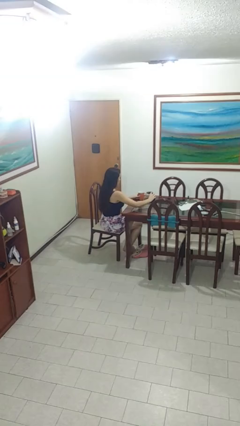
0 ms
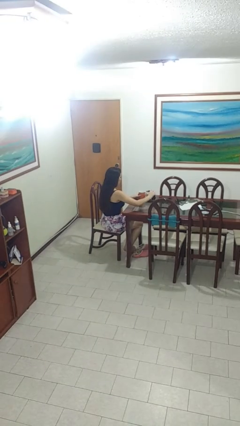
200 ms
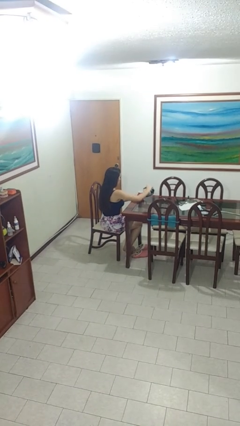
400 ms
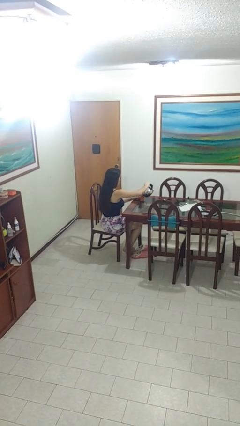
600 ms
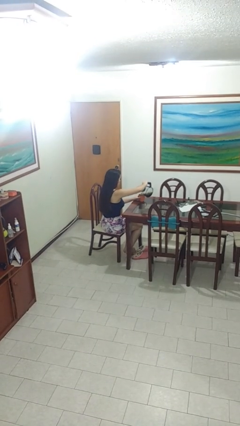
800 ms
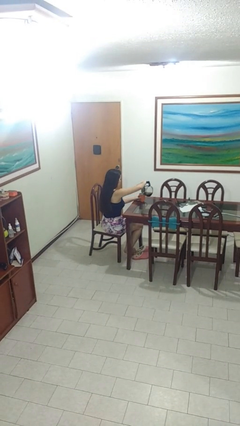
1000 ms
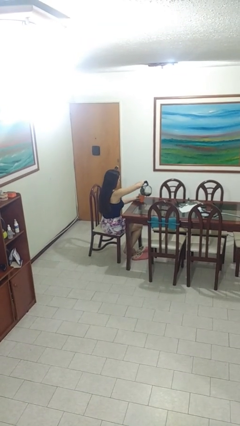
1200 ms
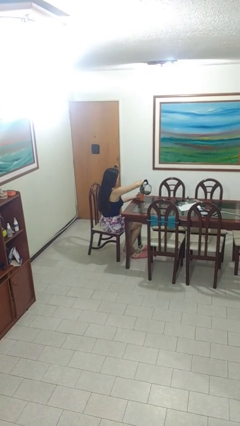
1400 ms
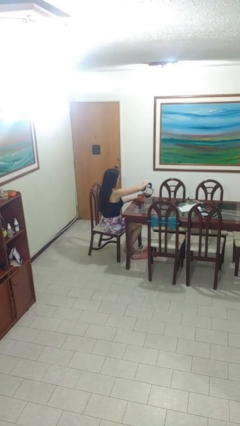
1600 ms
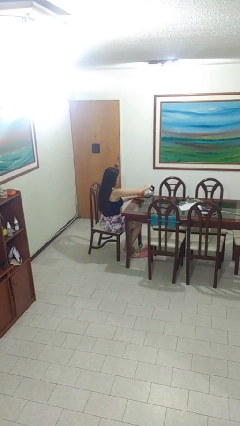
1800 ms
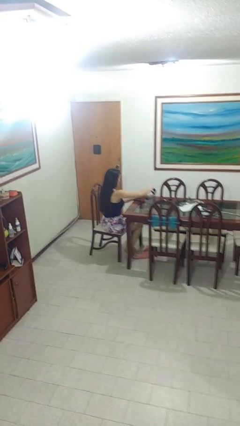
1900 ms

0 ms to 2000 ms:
person pours coffee into mug

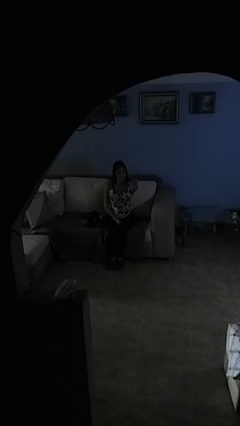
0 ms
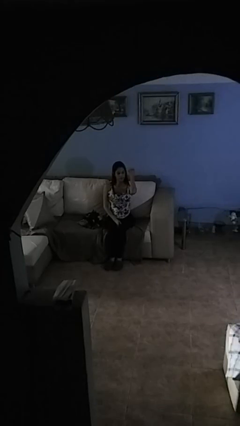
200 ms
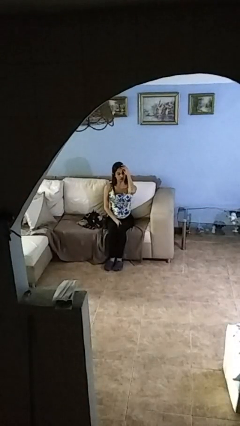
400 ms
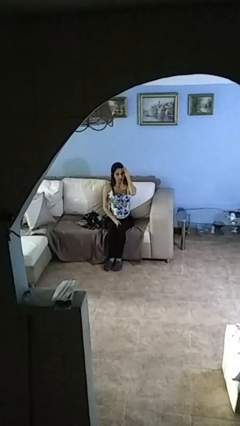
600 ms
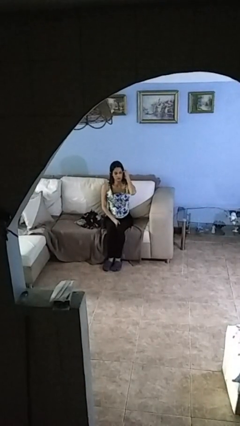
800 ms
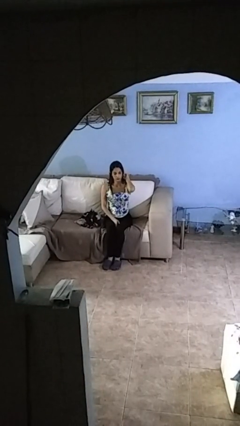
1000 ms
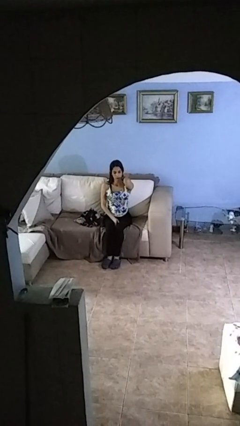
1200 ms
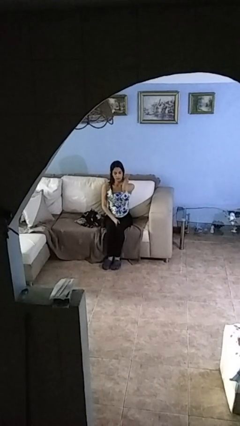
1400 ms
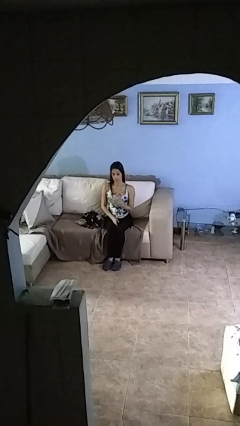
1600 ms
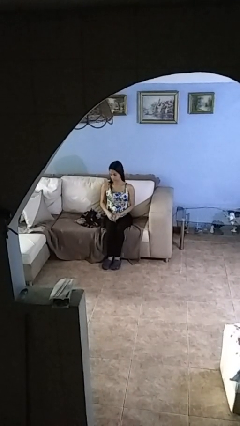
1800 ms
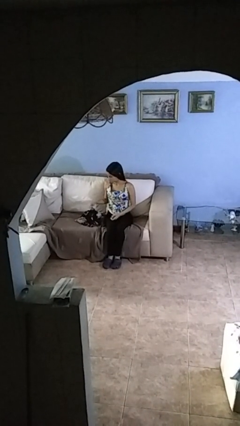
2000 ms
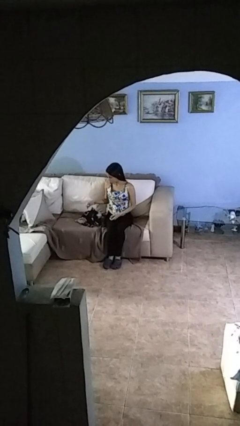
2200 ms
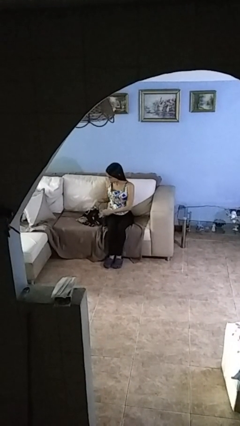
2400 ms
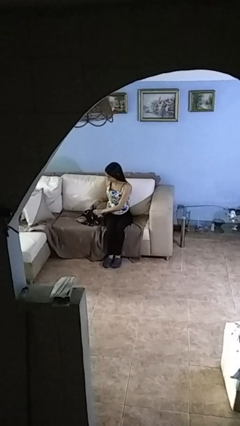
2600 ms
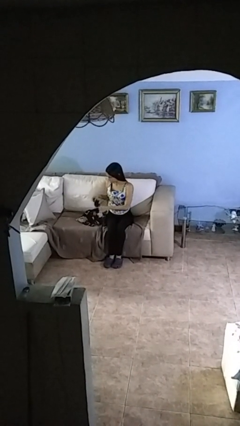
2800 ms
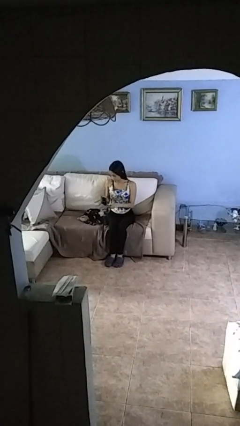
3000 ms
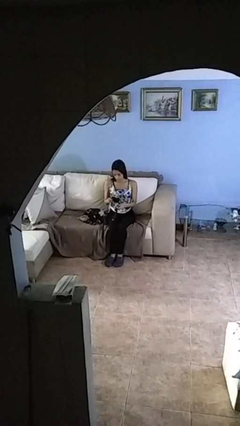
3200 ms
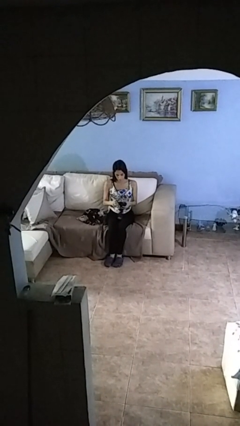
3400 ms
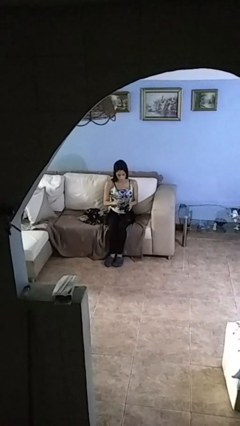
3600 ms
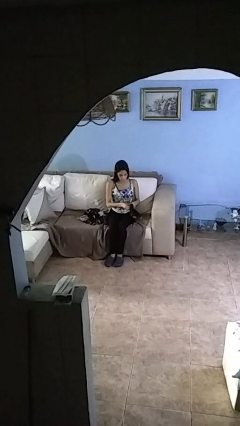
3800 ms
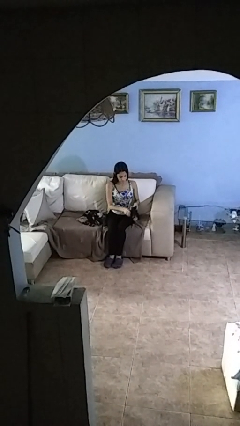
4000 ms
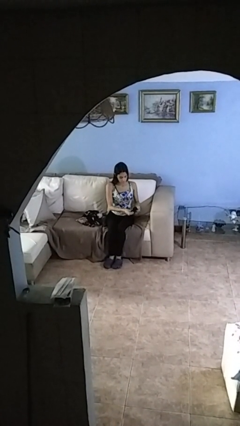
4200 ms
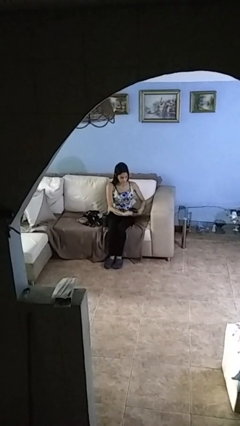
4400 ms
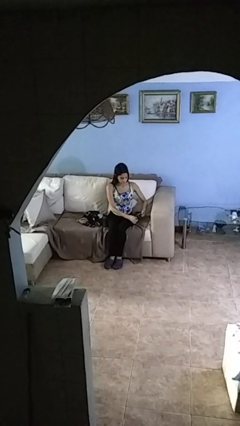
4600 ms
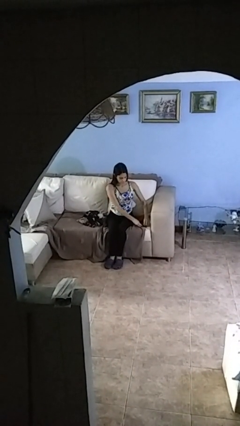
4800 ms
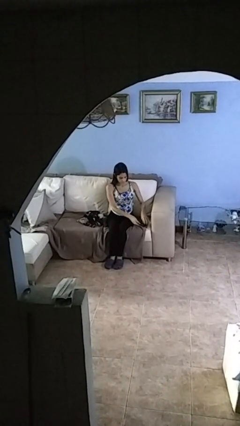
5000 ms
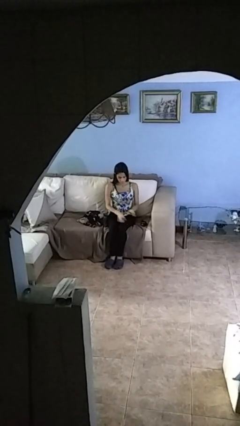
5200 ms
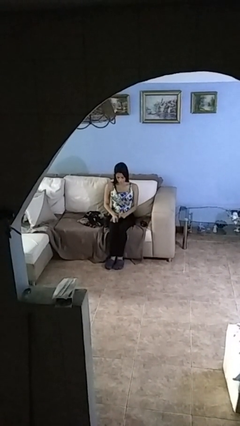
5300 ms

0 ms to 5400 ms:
person folds socks

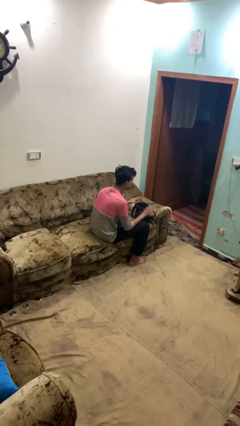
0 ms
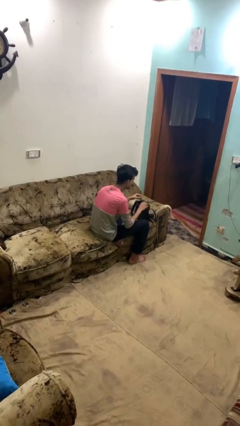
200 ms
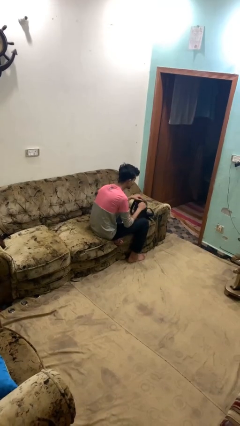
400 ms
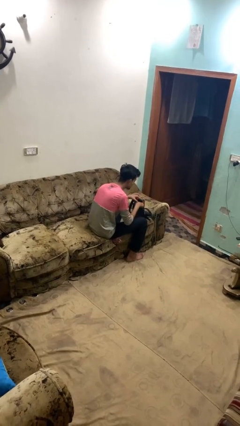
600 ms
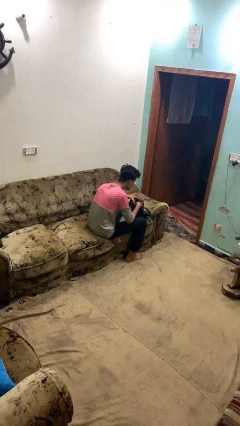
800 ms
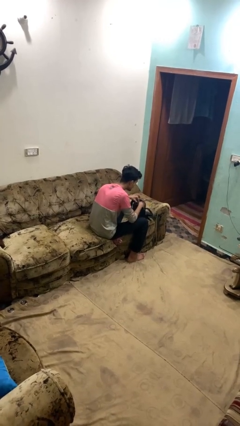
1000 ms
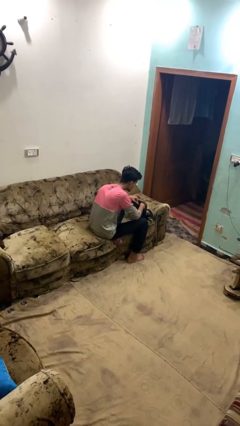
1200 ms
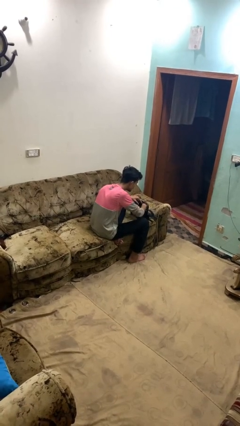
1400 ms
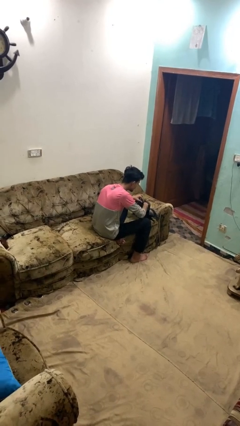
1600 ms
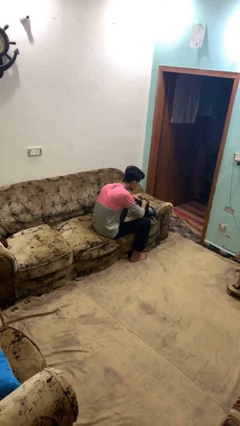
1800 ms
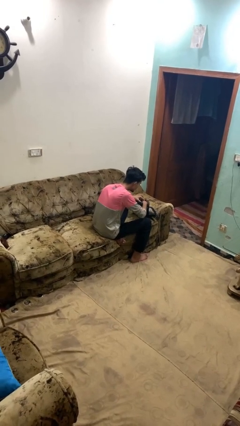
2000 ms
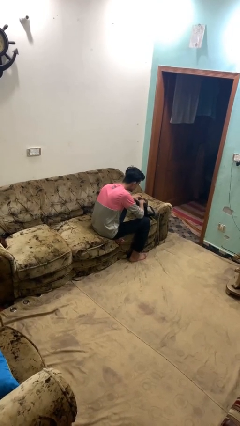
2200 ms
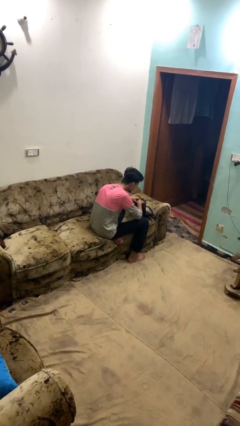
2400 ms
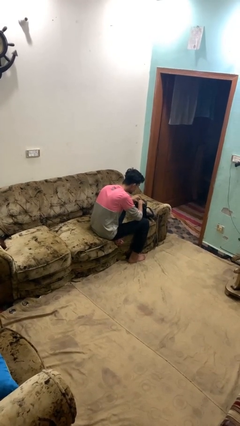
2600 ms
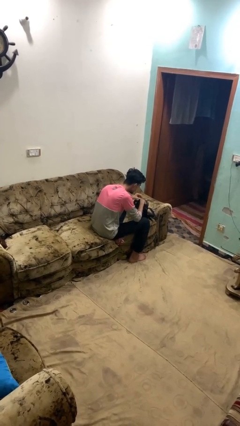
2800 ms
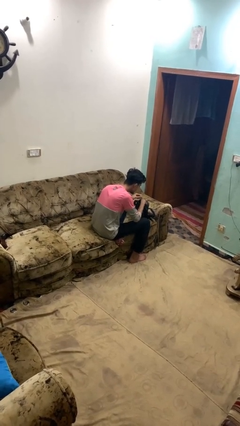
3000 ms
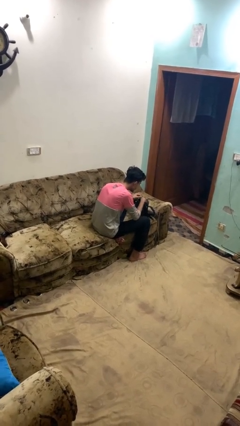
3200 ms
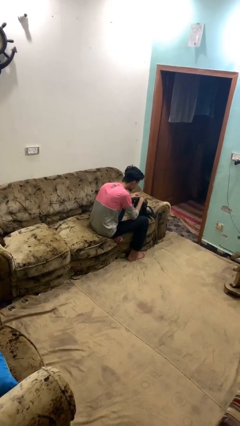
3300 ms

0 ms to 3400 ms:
person searches in backpack

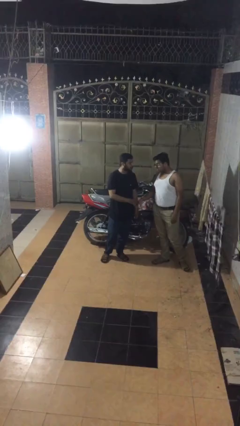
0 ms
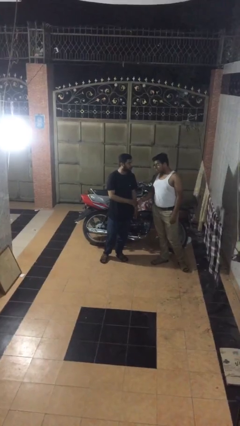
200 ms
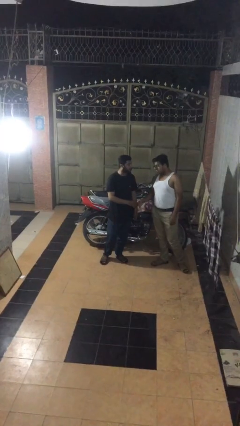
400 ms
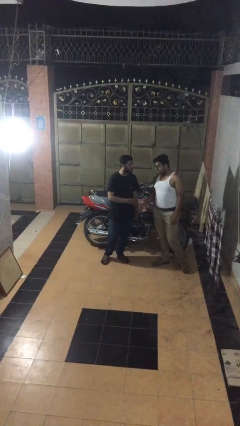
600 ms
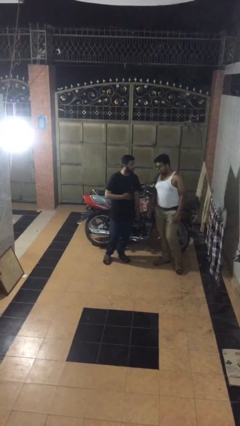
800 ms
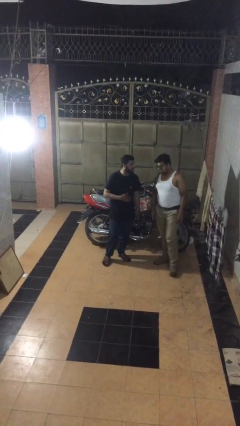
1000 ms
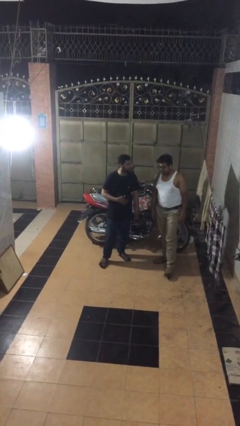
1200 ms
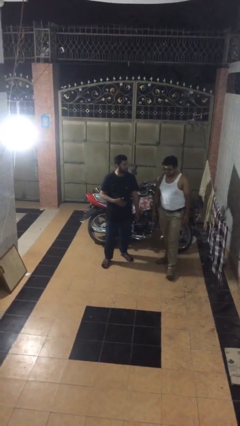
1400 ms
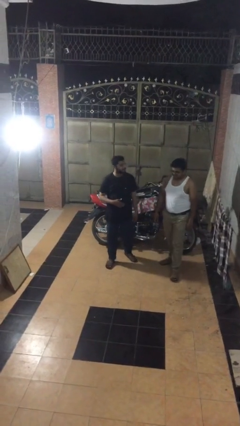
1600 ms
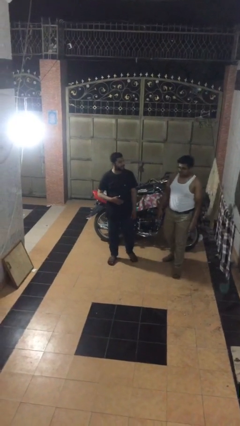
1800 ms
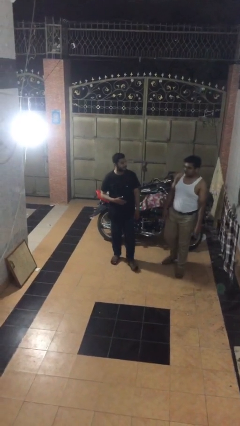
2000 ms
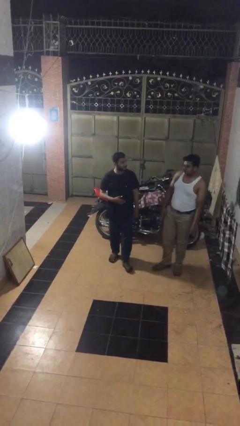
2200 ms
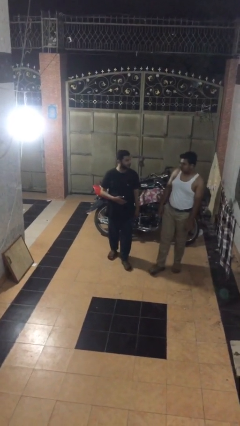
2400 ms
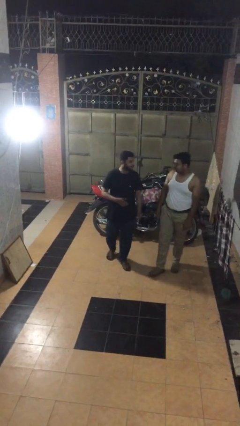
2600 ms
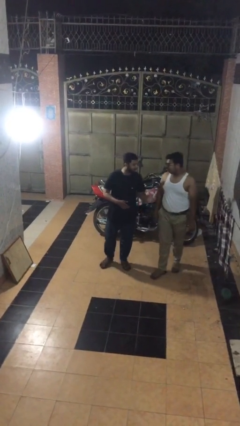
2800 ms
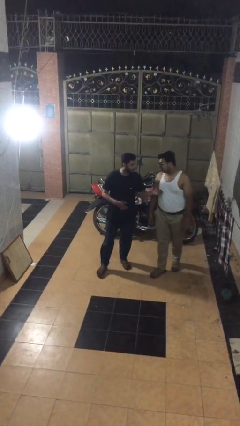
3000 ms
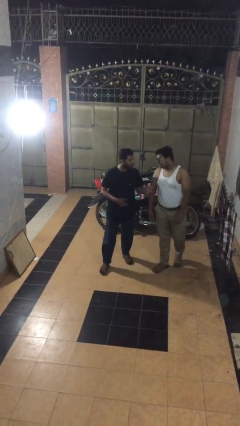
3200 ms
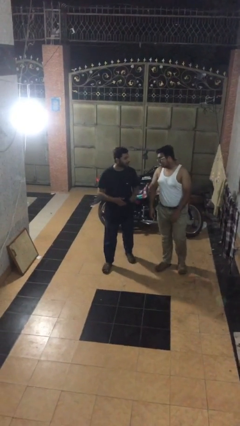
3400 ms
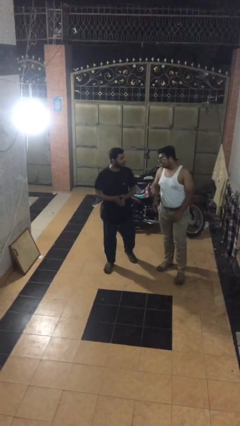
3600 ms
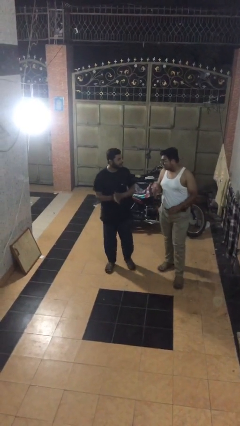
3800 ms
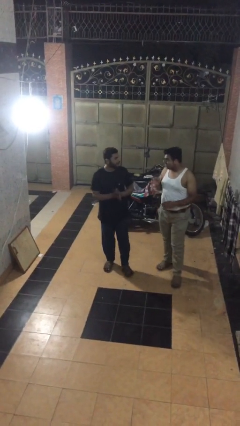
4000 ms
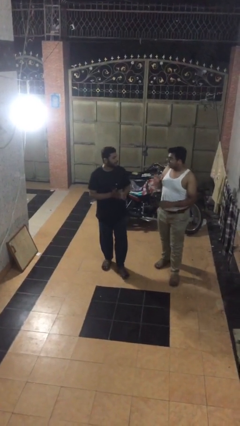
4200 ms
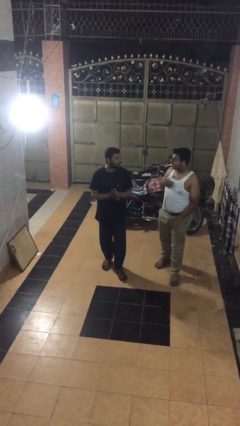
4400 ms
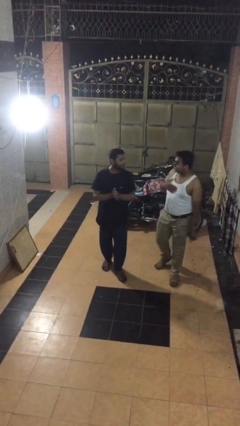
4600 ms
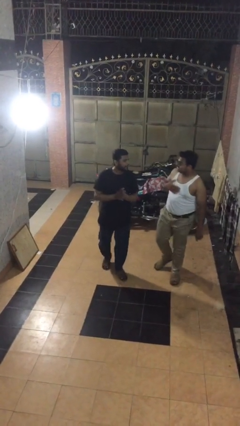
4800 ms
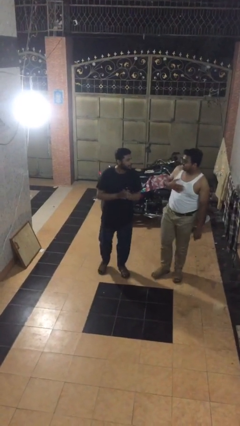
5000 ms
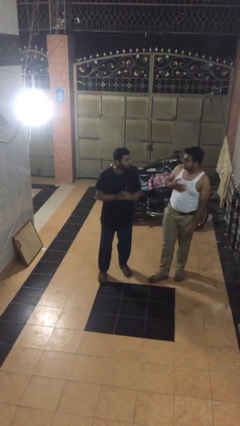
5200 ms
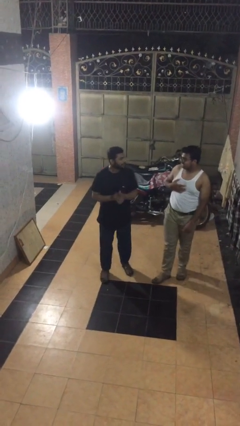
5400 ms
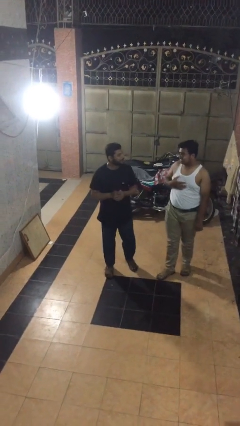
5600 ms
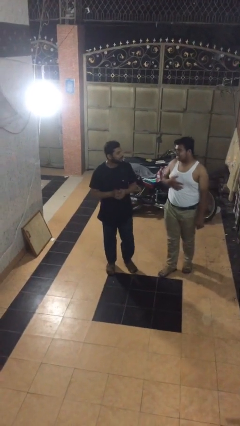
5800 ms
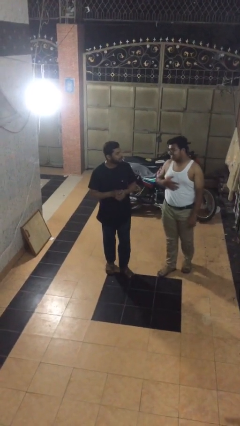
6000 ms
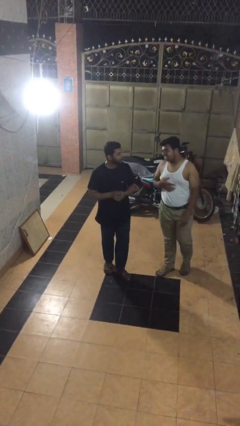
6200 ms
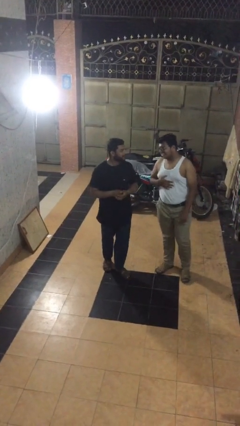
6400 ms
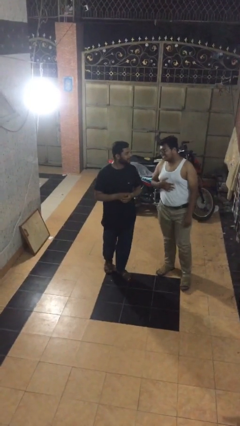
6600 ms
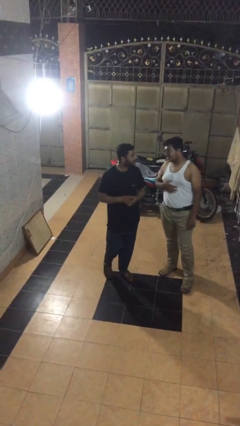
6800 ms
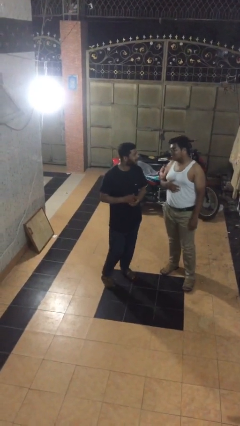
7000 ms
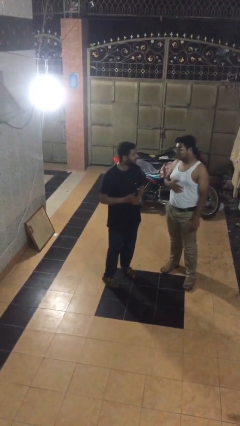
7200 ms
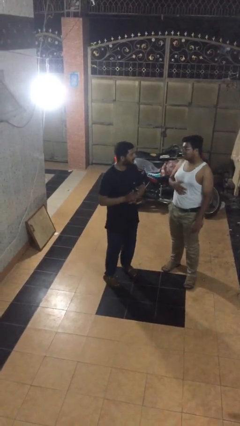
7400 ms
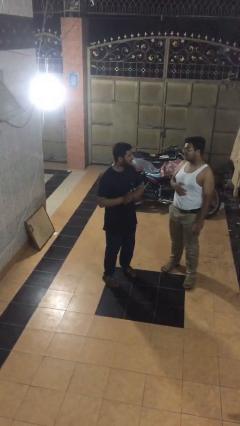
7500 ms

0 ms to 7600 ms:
person talks to person
